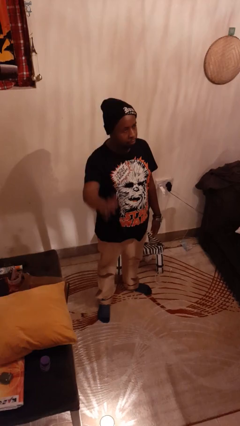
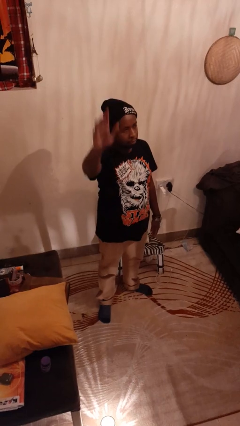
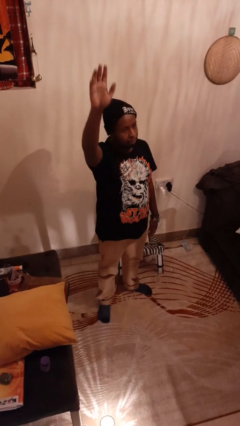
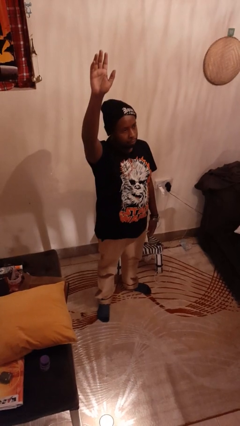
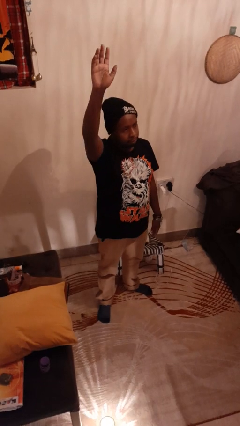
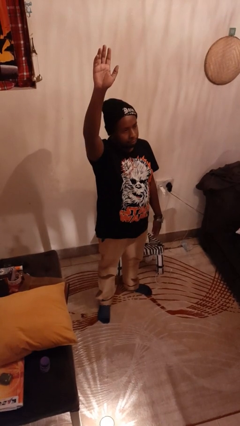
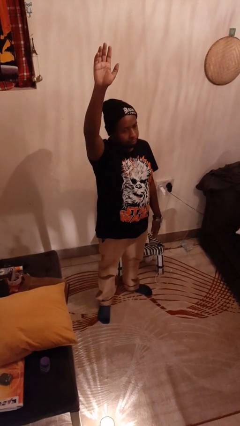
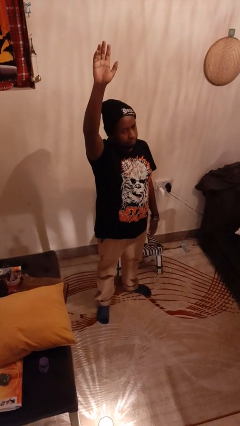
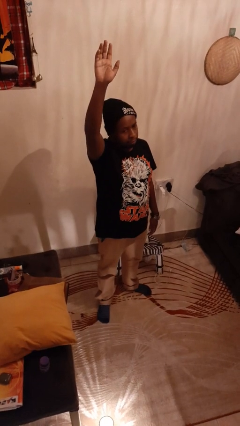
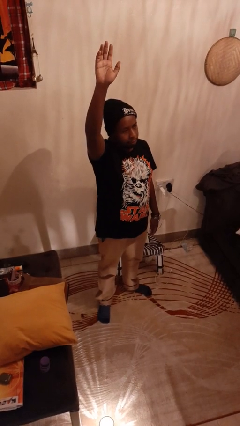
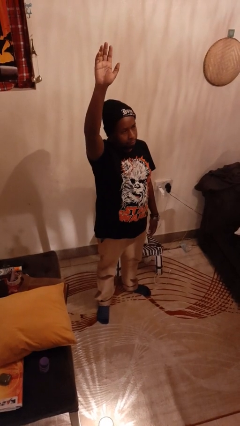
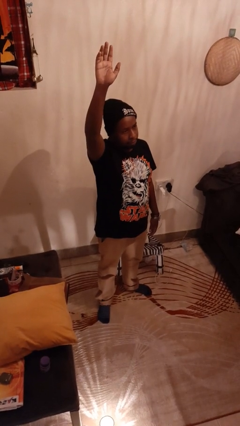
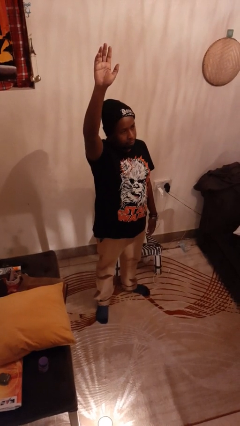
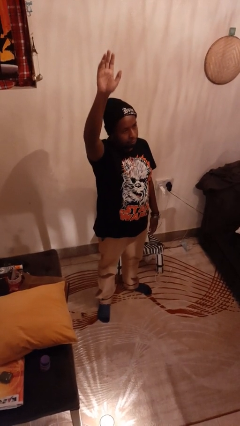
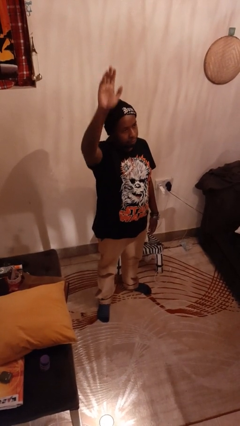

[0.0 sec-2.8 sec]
person gestures raise hand

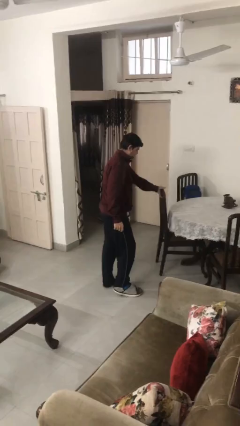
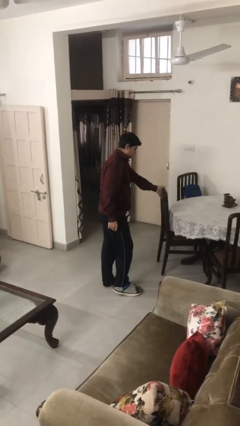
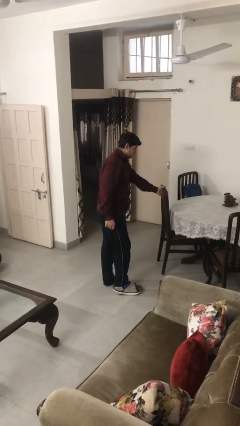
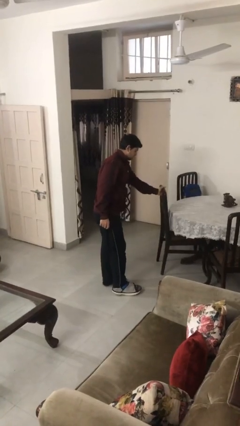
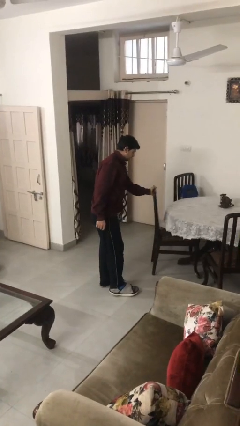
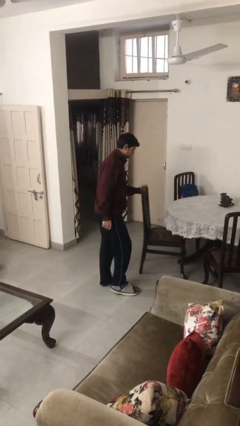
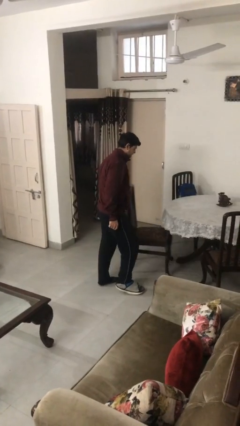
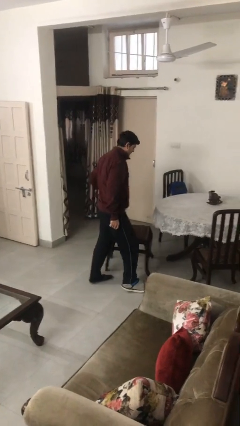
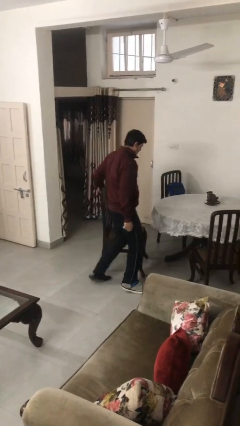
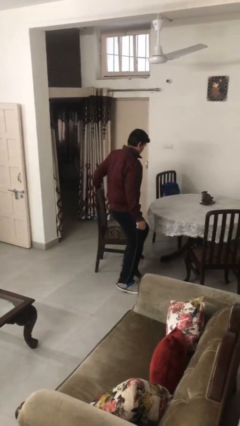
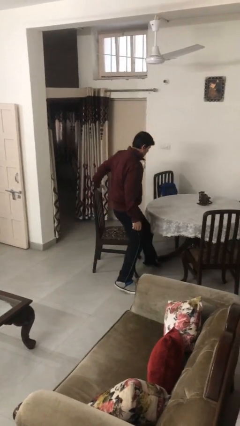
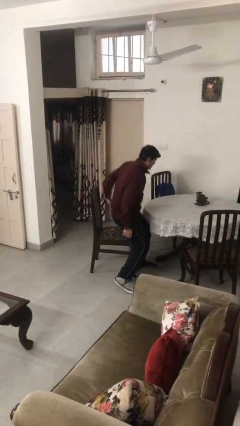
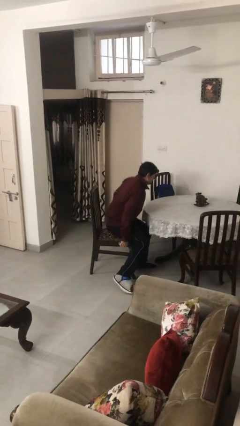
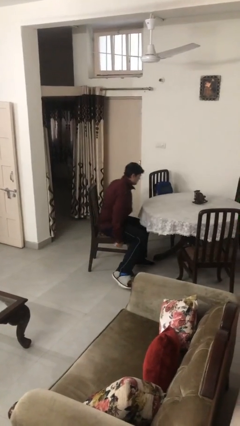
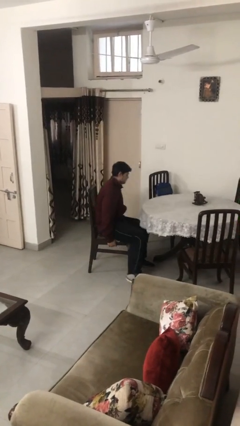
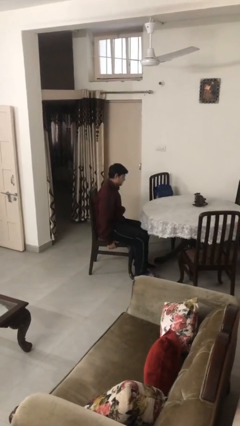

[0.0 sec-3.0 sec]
person sits down

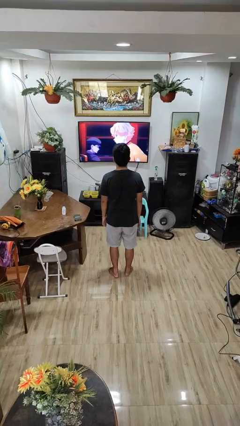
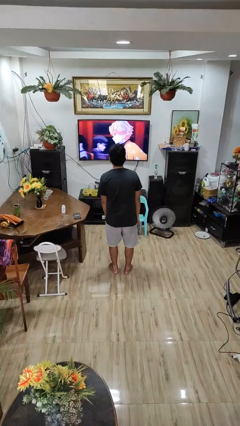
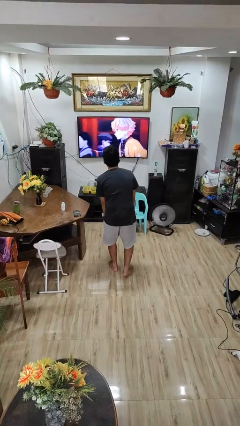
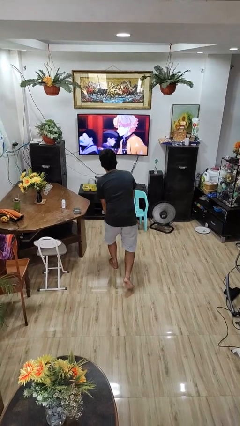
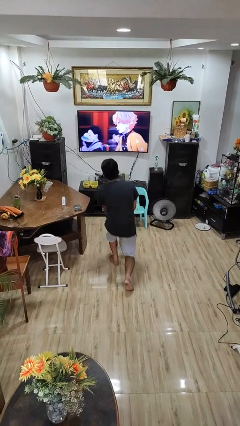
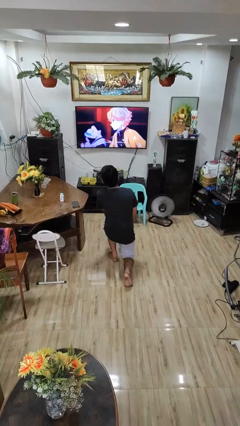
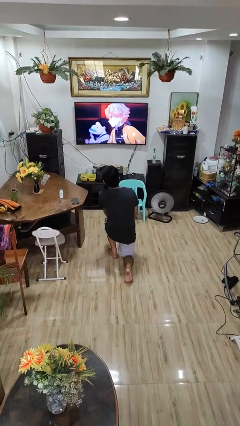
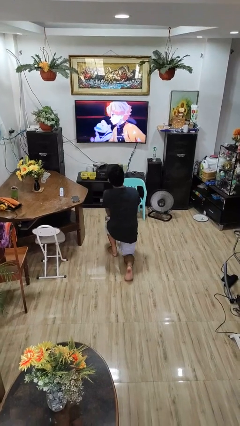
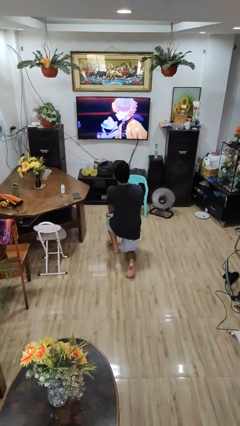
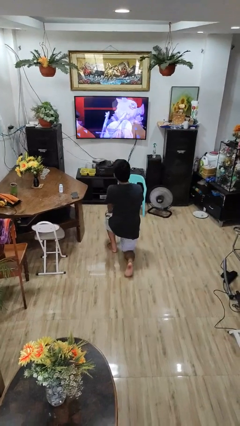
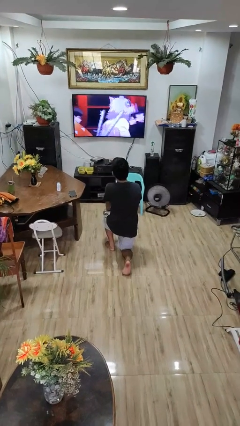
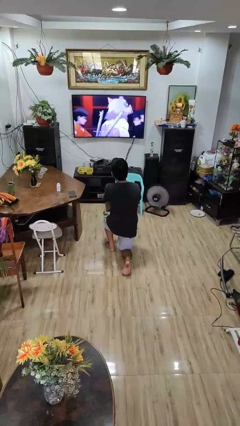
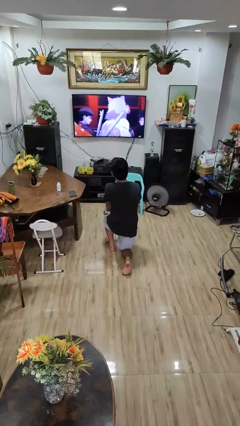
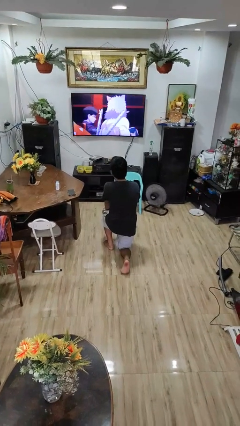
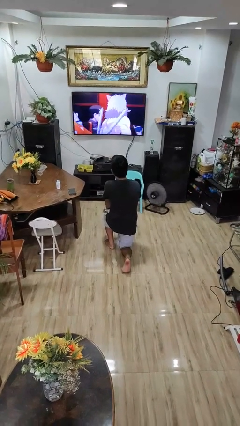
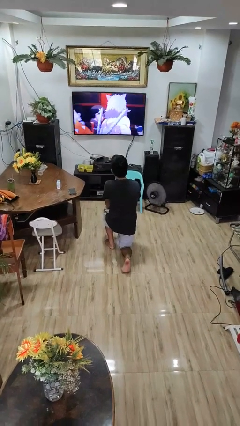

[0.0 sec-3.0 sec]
person kneels

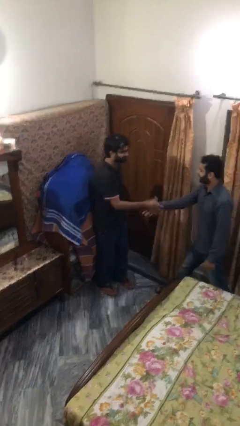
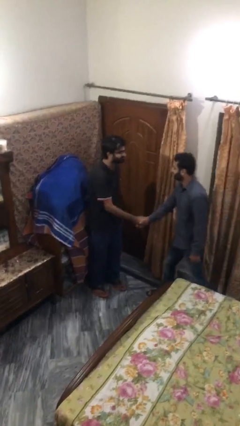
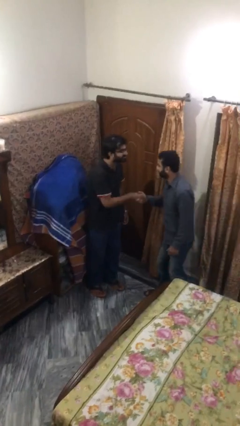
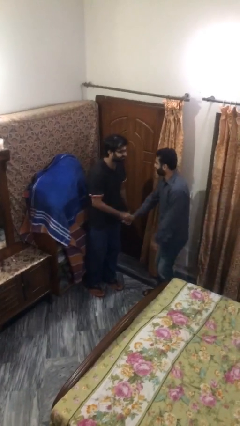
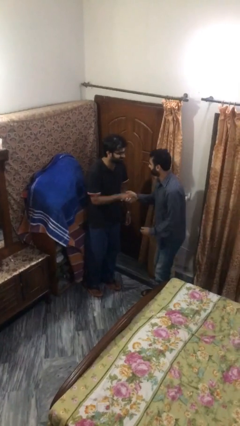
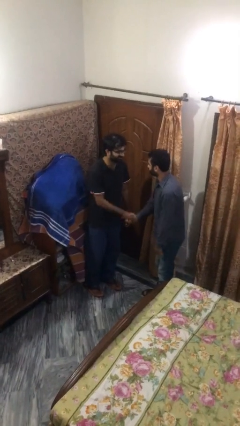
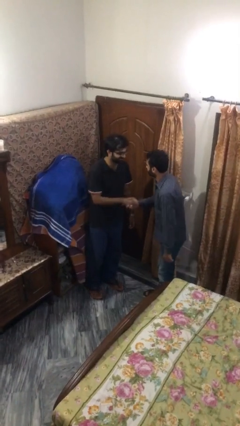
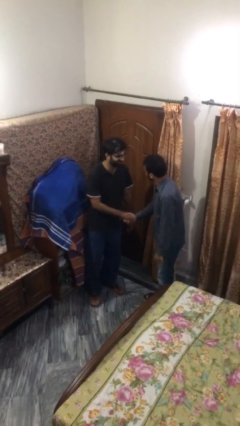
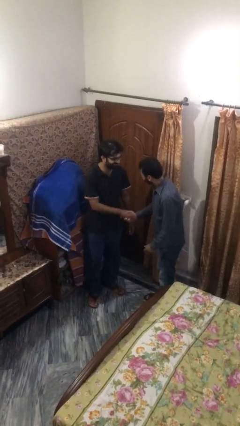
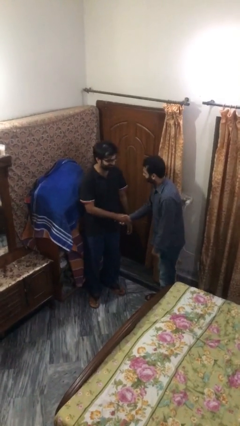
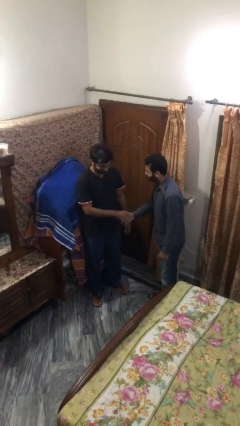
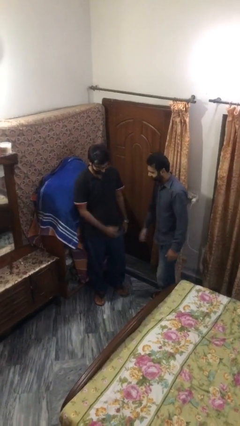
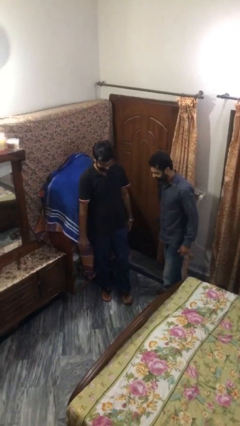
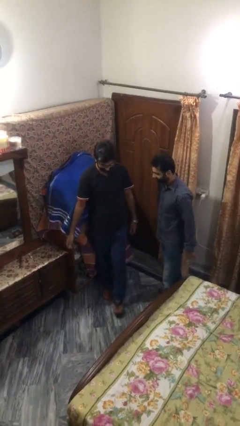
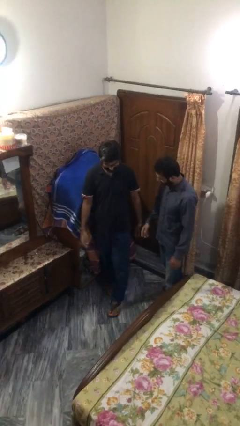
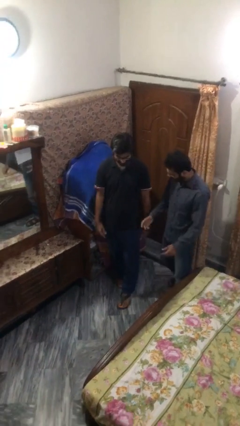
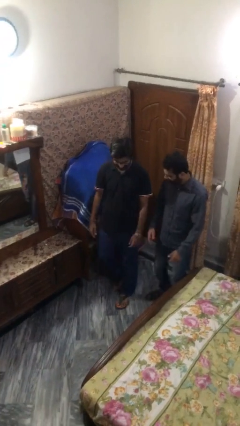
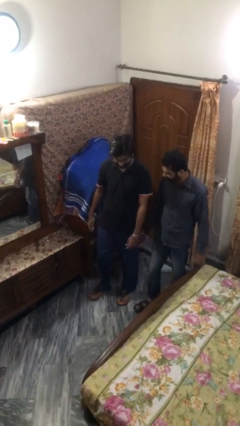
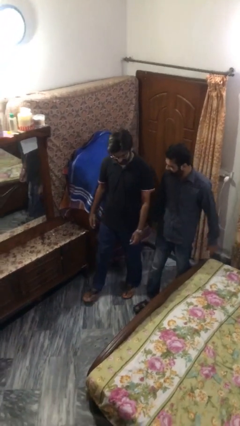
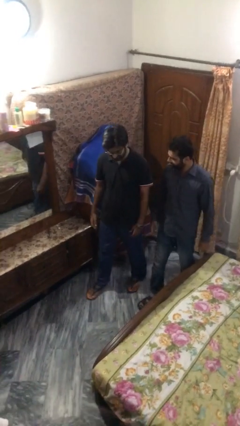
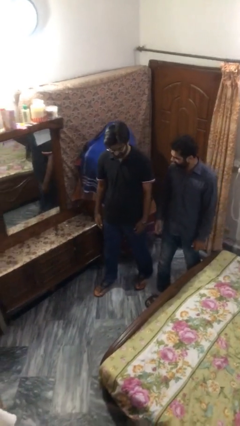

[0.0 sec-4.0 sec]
person shakes hand

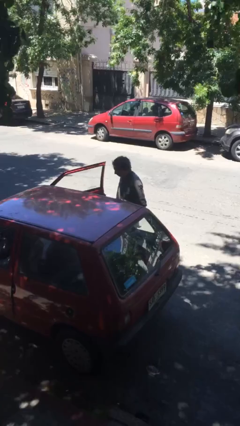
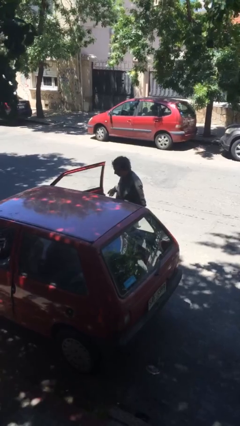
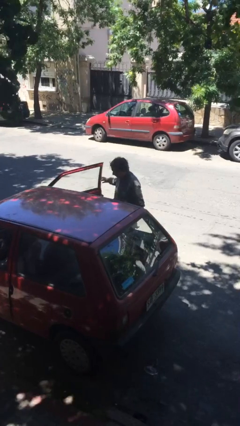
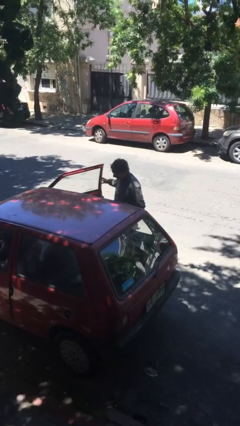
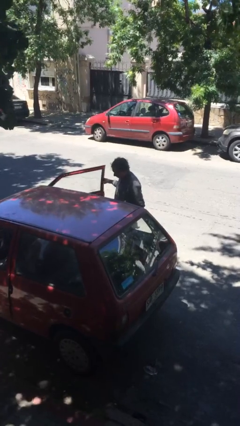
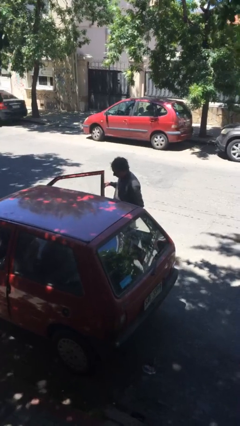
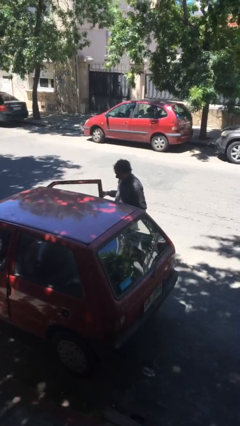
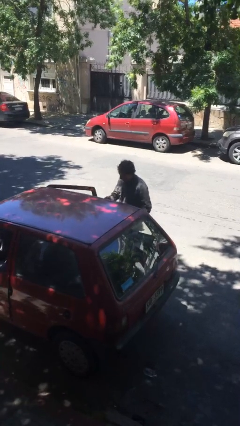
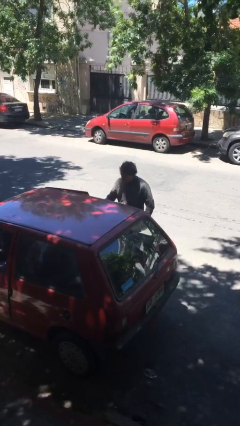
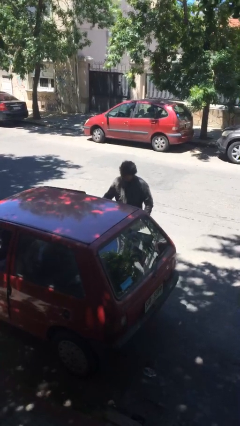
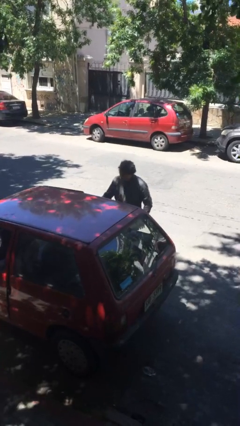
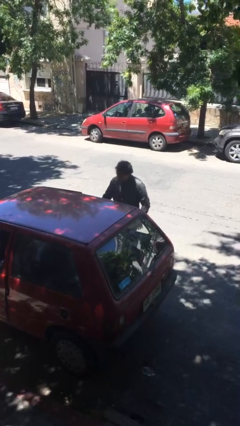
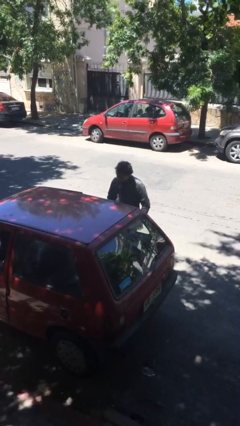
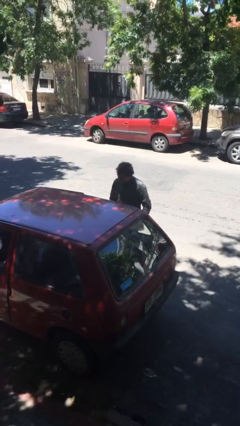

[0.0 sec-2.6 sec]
person closes car door

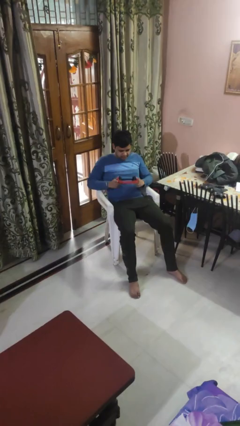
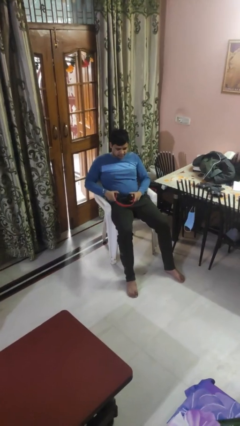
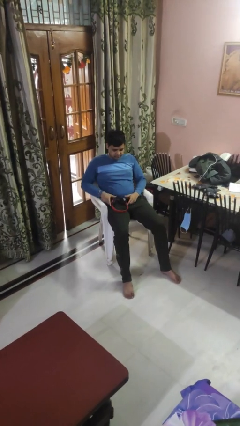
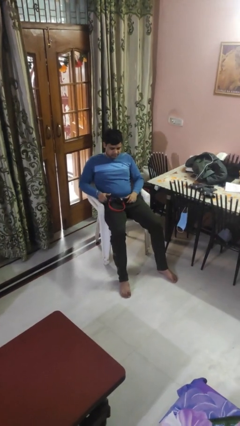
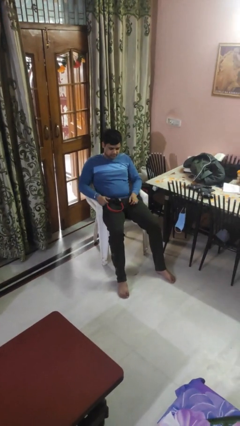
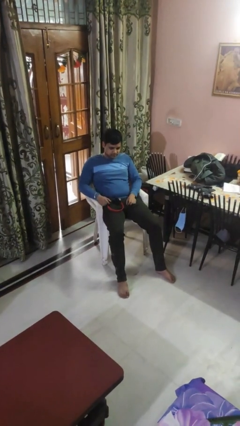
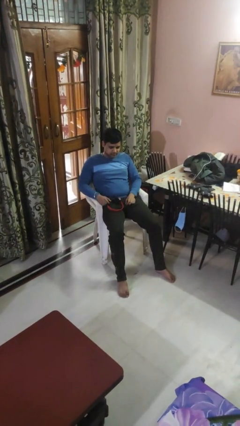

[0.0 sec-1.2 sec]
person takes off headphones

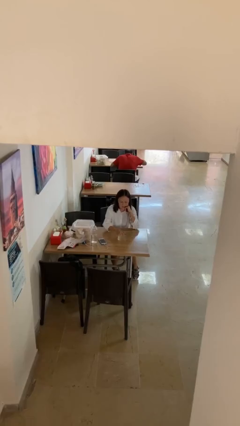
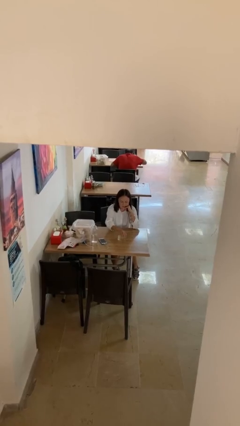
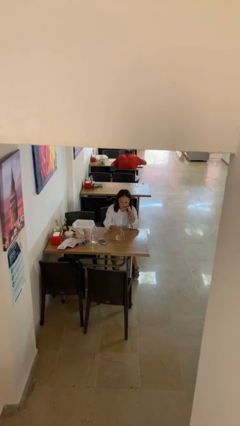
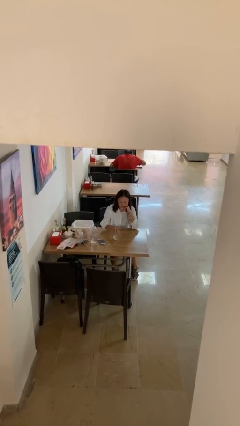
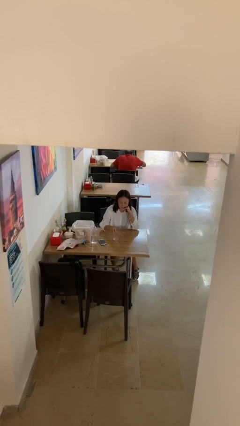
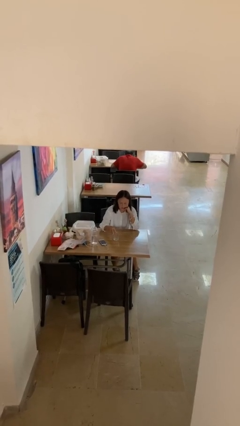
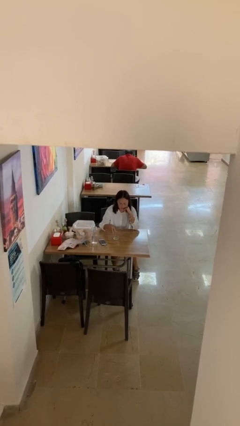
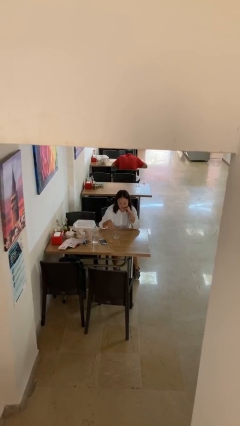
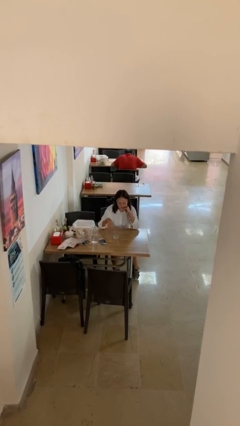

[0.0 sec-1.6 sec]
person sets upright glass
